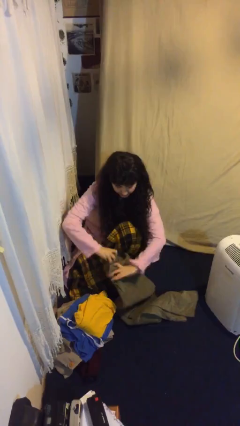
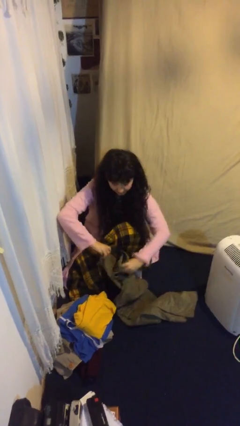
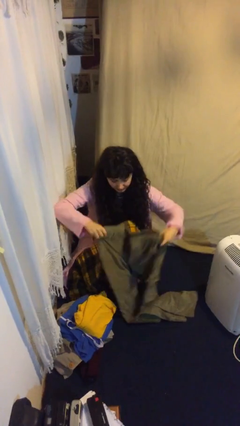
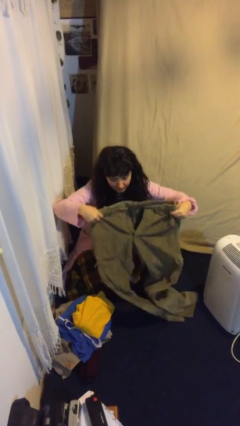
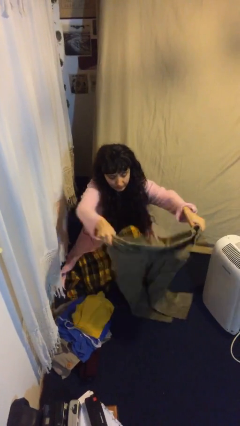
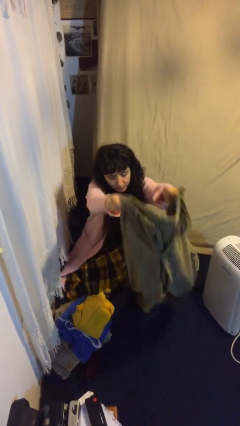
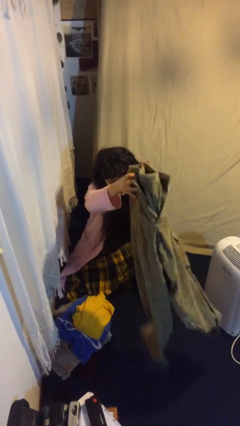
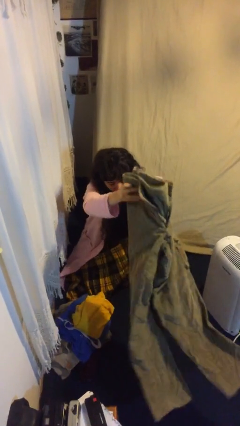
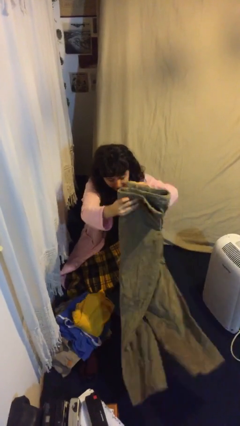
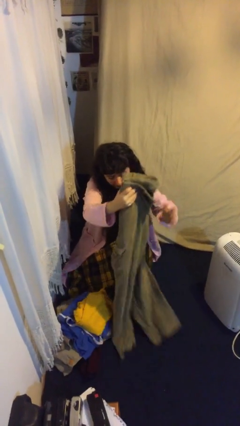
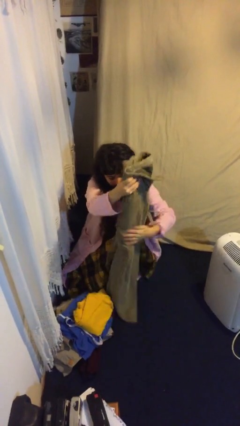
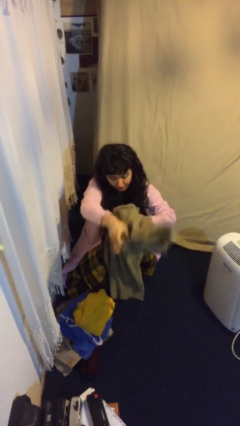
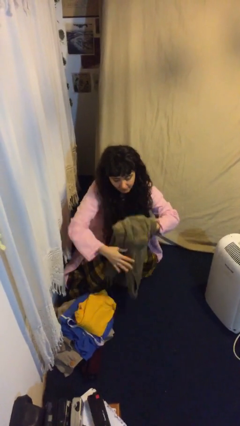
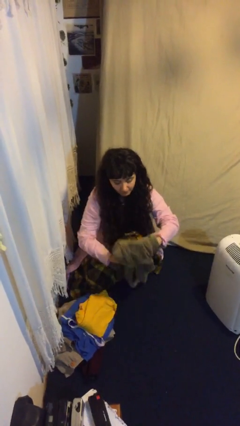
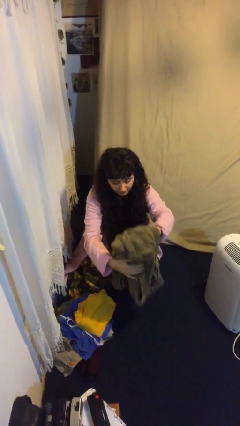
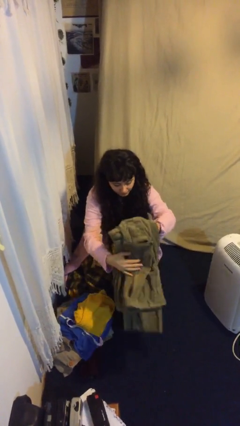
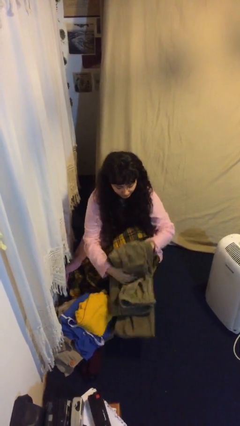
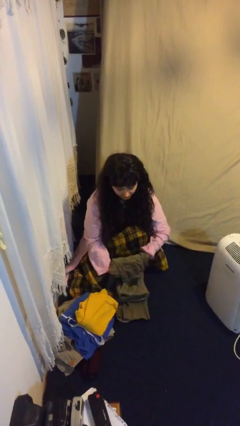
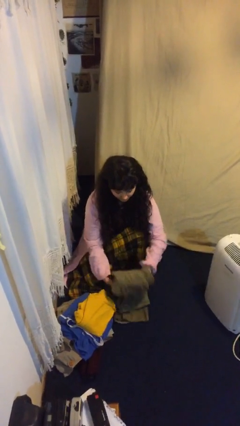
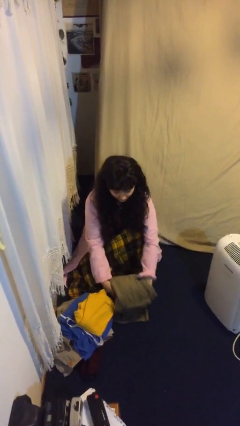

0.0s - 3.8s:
person folds pants

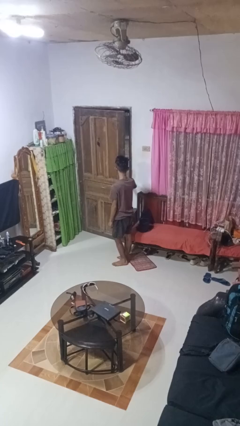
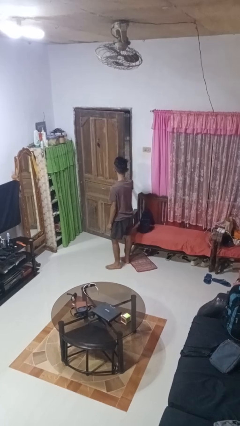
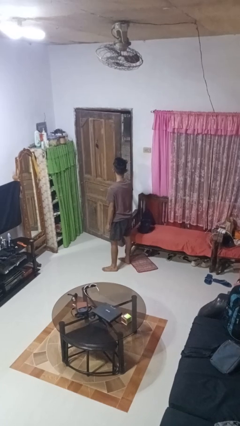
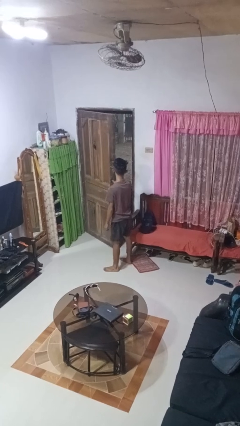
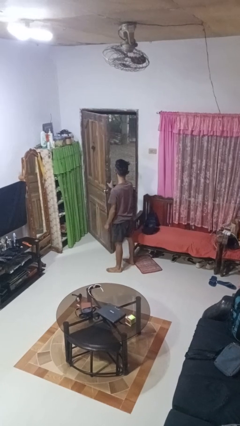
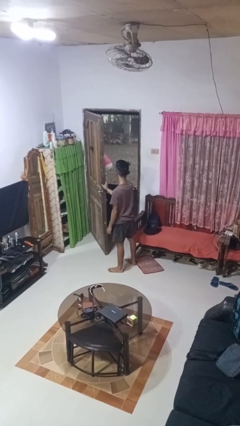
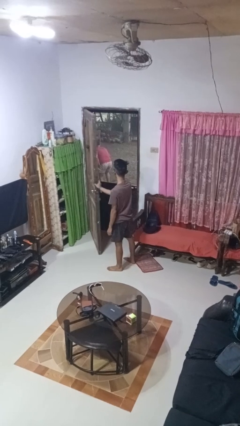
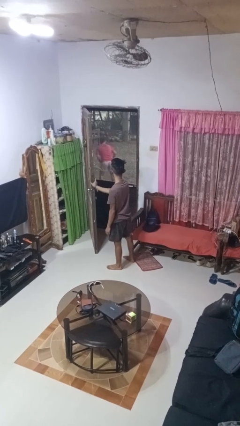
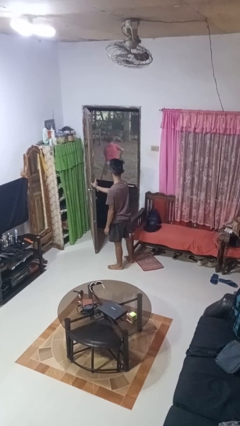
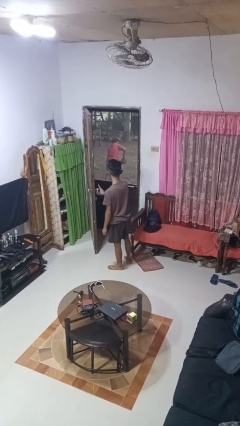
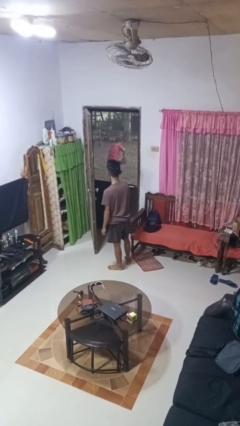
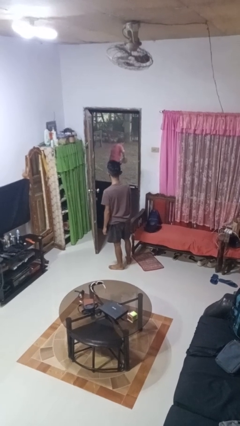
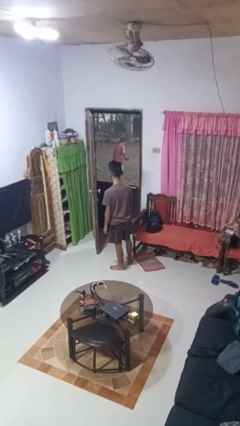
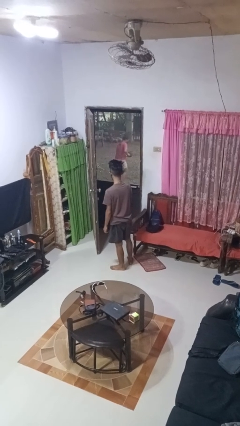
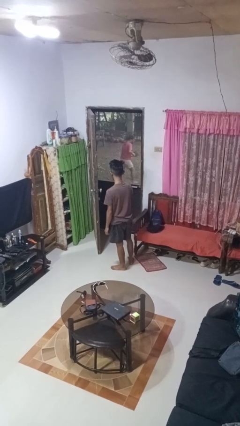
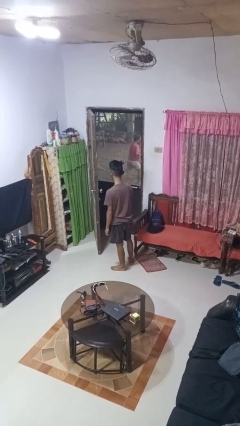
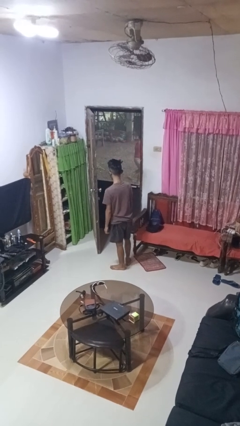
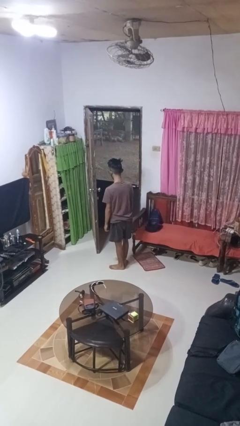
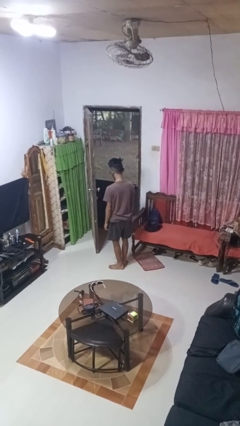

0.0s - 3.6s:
person opens facility door

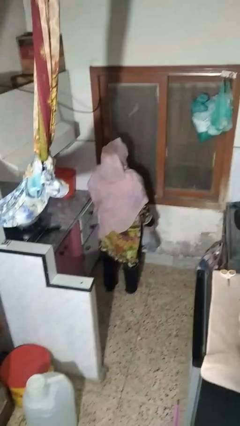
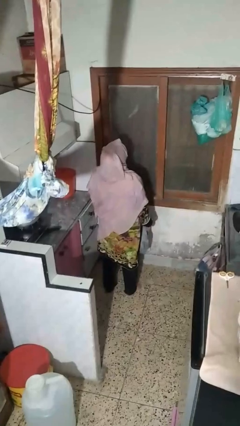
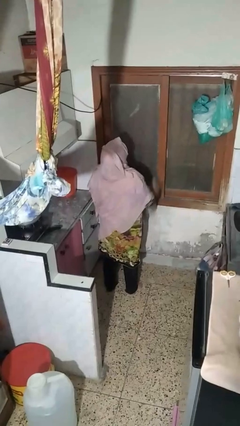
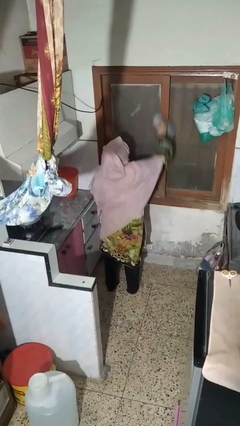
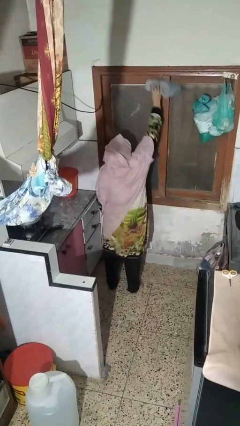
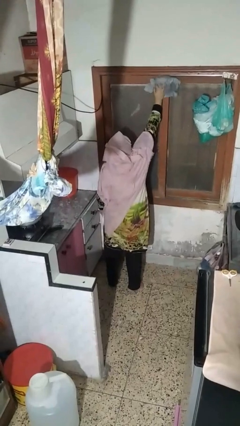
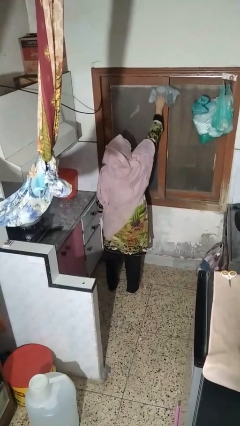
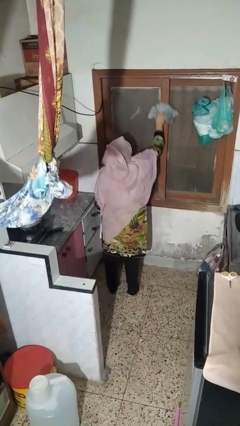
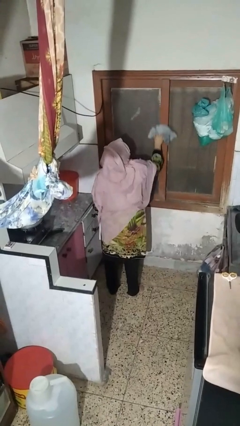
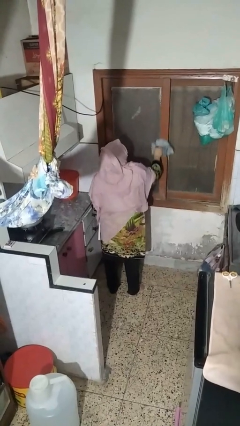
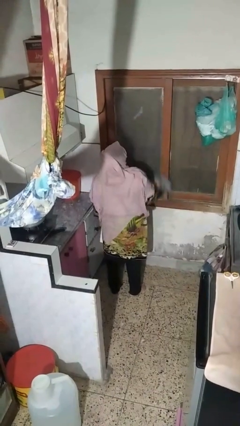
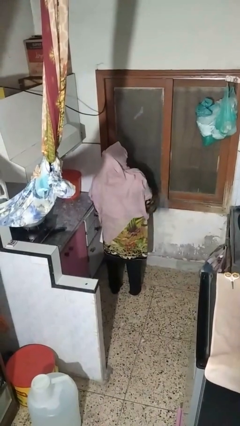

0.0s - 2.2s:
person washes window

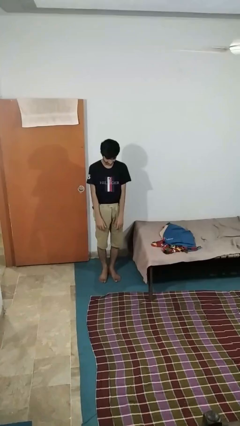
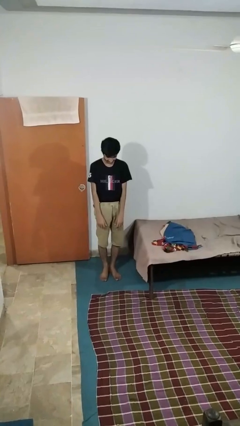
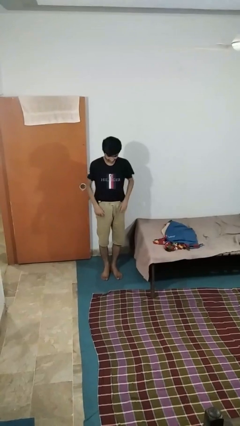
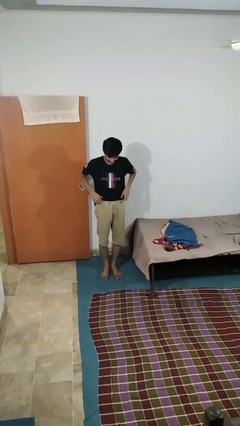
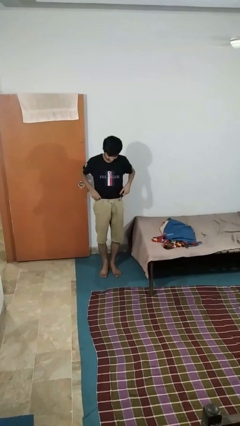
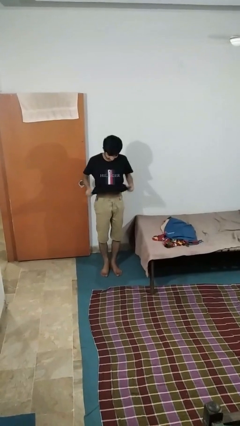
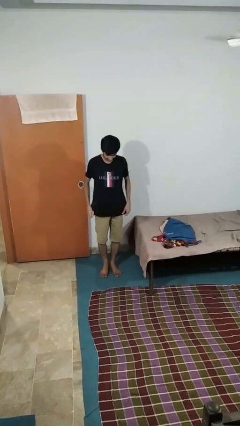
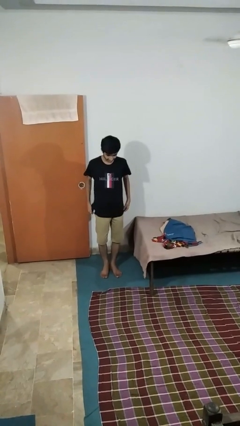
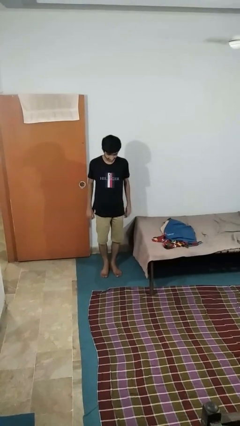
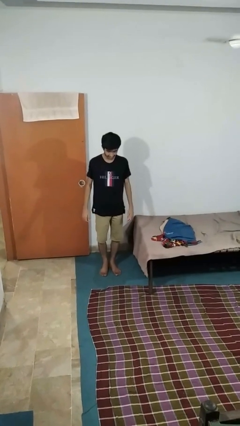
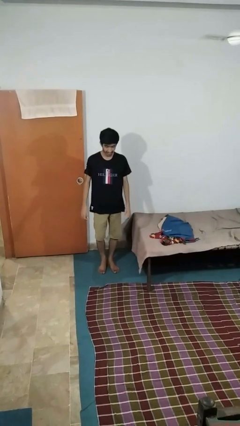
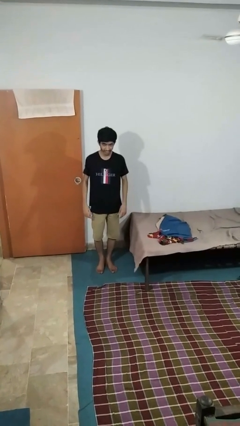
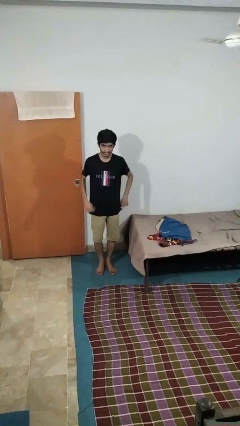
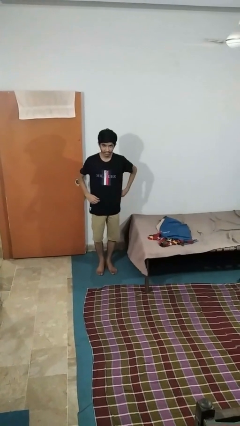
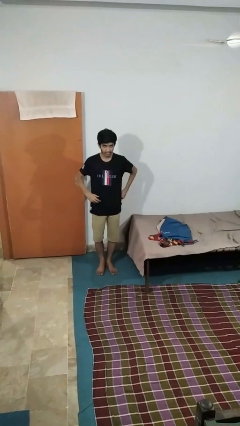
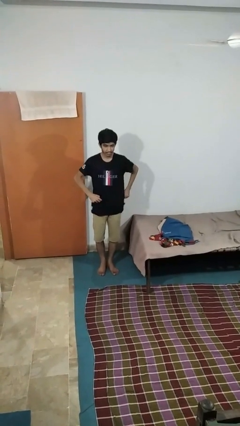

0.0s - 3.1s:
person untucks shirt

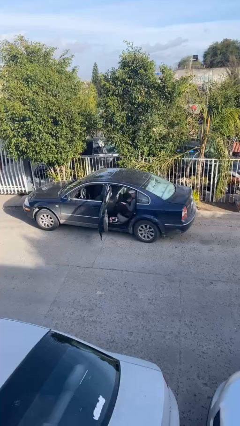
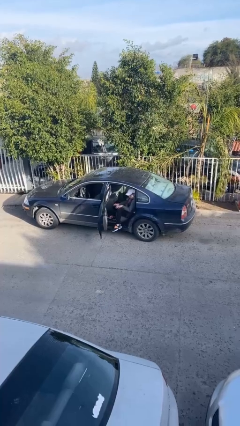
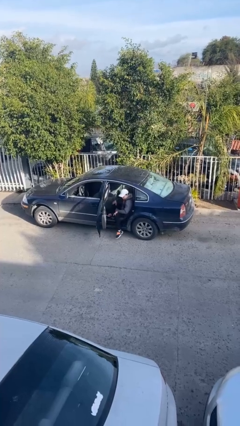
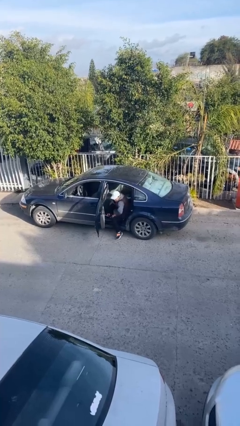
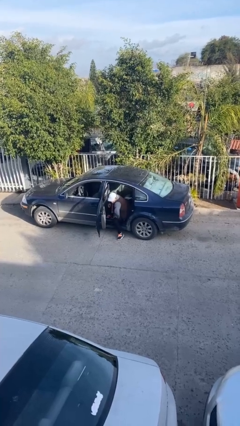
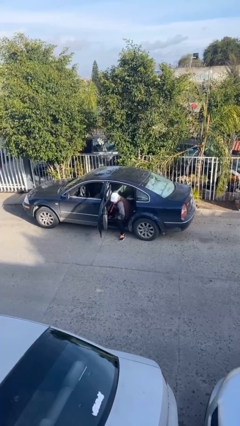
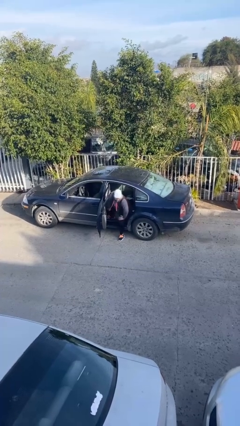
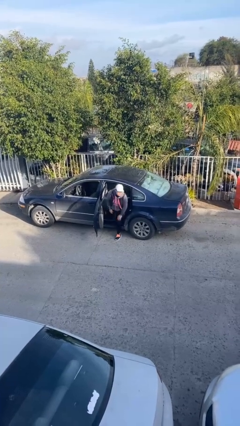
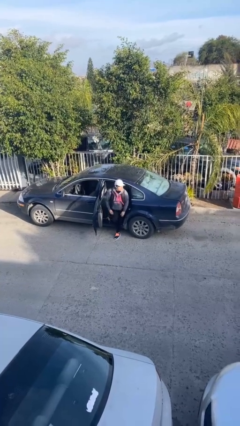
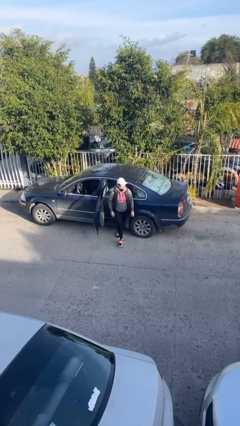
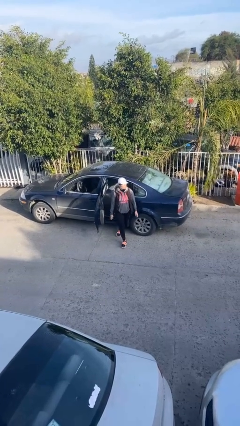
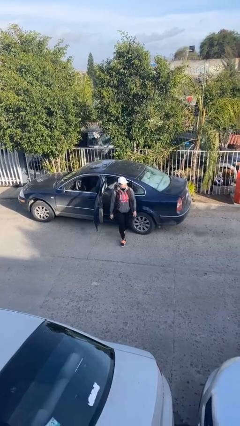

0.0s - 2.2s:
person exits car

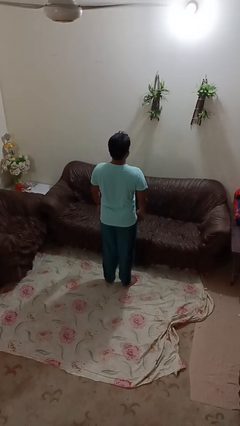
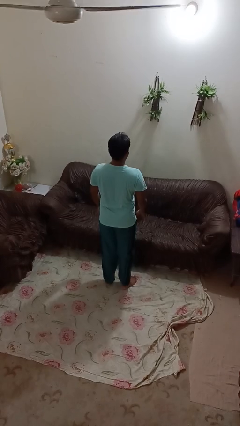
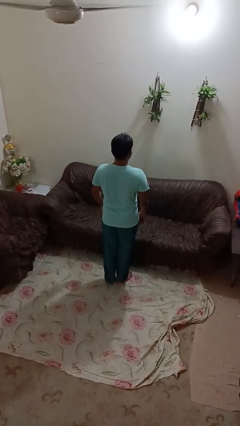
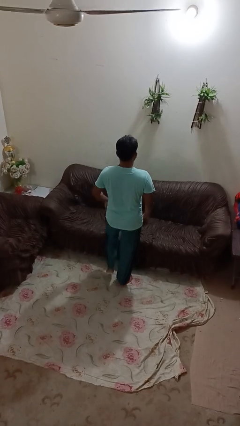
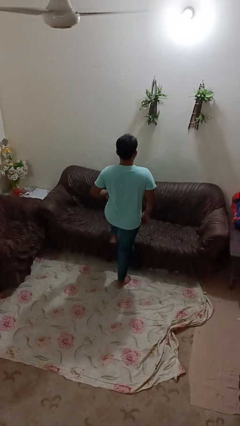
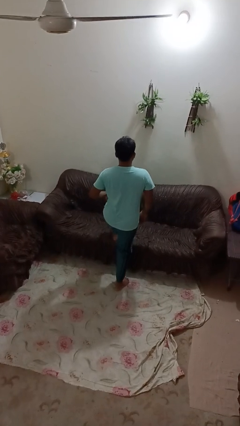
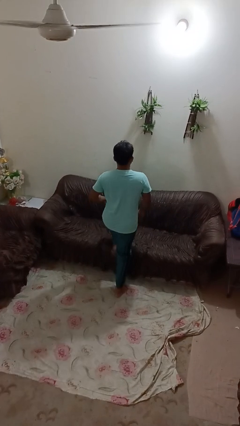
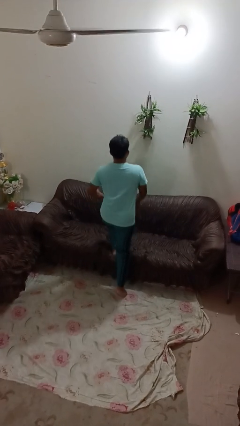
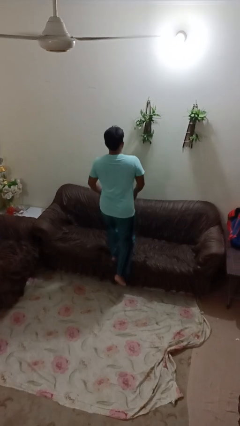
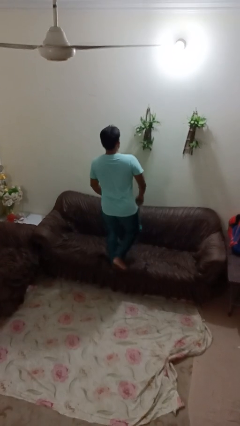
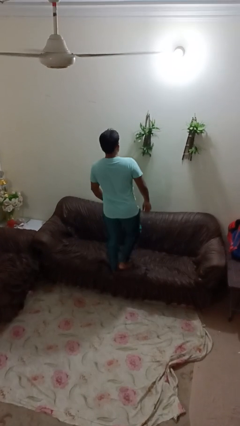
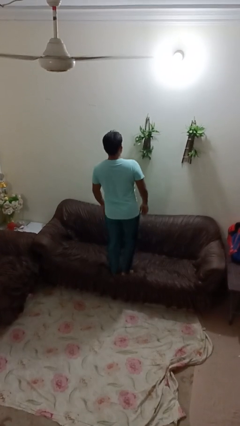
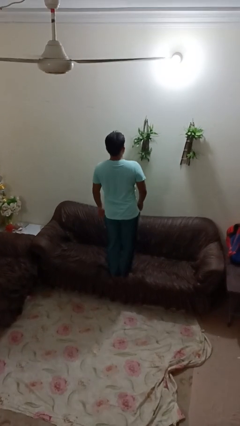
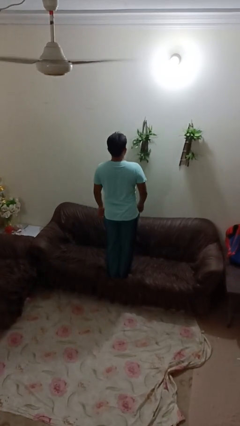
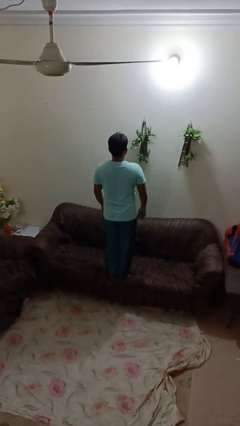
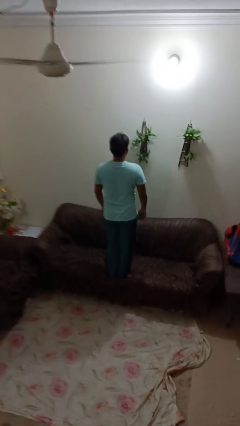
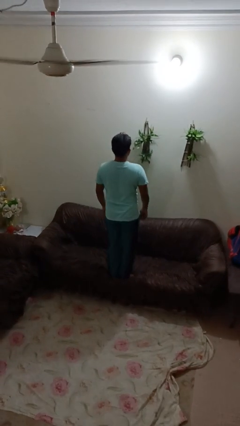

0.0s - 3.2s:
person climbs on couch
